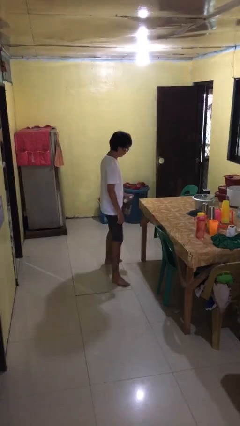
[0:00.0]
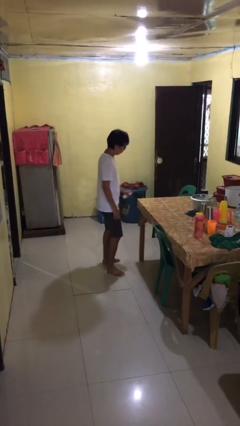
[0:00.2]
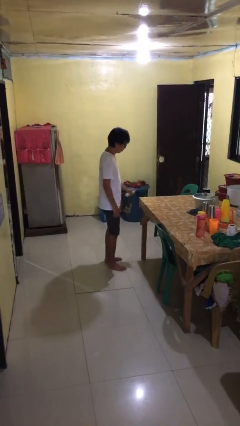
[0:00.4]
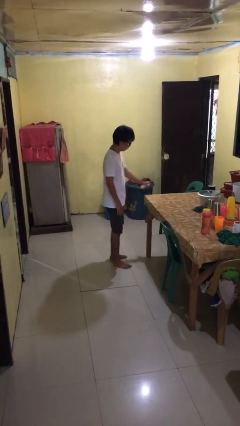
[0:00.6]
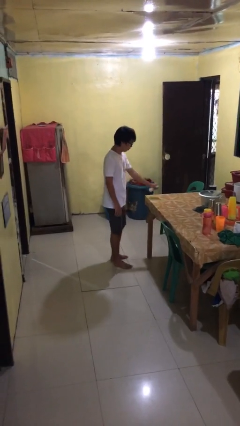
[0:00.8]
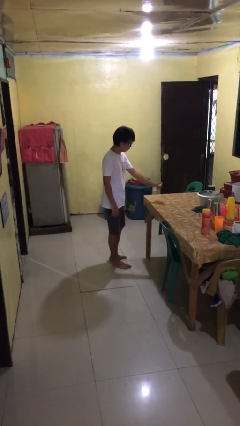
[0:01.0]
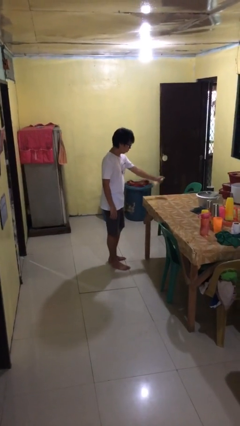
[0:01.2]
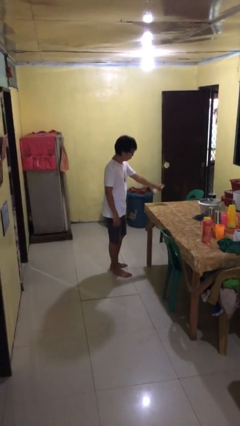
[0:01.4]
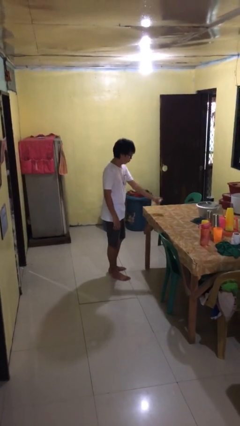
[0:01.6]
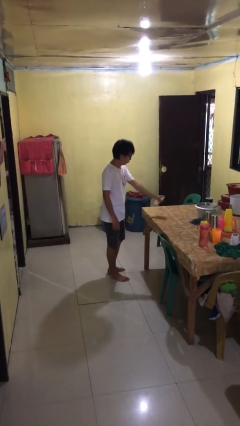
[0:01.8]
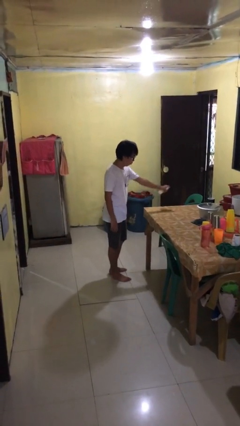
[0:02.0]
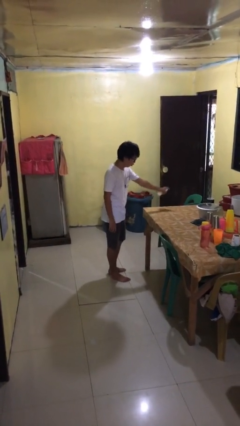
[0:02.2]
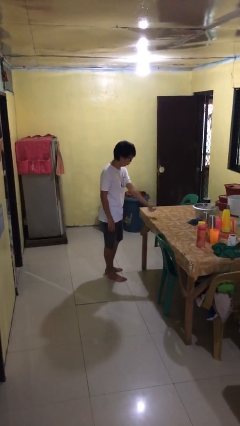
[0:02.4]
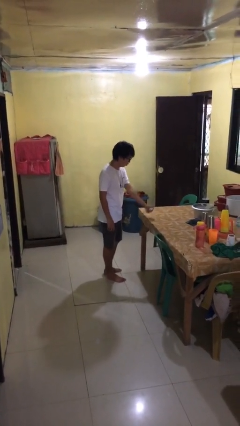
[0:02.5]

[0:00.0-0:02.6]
person sprays from bottle

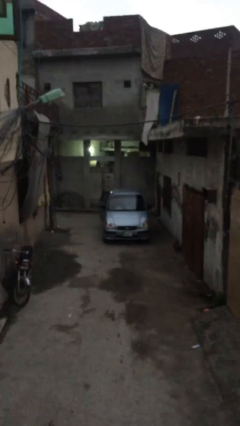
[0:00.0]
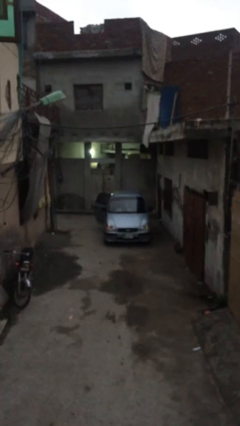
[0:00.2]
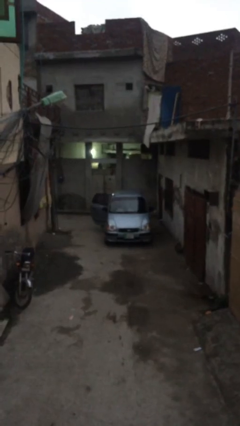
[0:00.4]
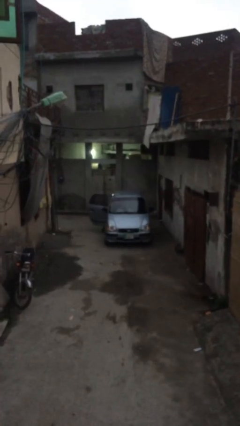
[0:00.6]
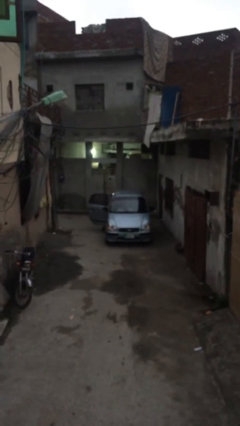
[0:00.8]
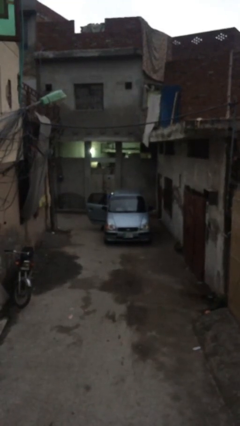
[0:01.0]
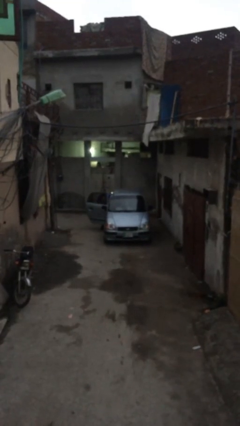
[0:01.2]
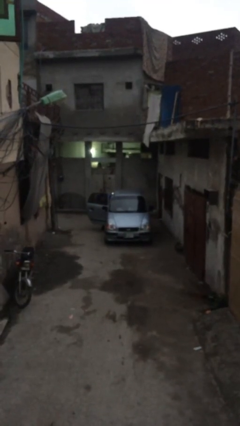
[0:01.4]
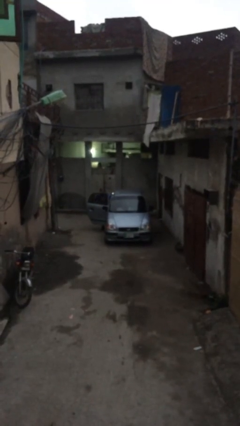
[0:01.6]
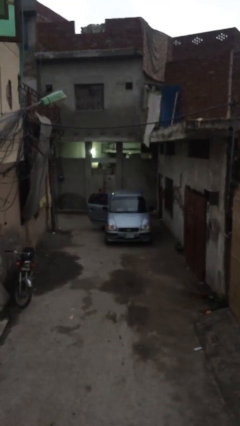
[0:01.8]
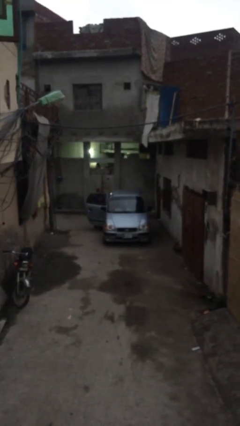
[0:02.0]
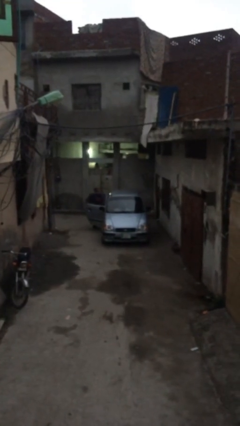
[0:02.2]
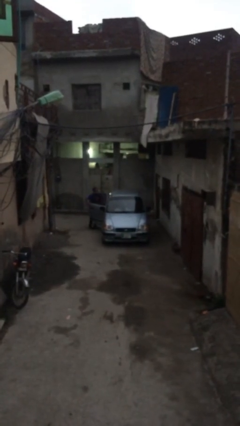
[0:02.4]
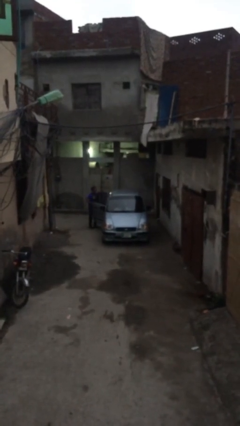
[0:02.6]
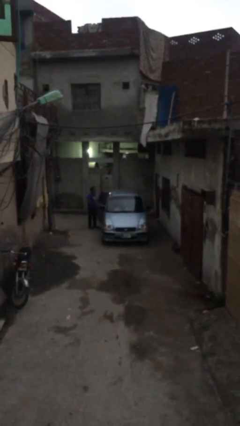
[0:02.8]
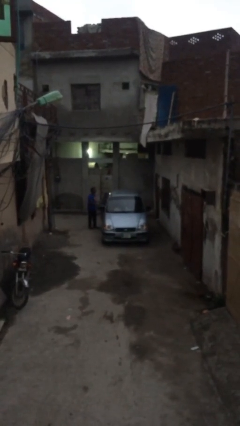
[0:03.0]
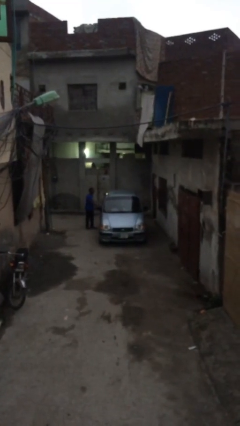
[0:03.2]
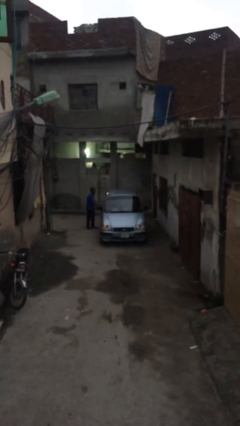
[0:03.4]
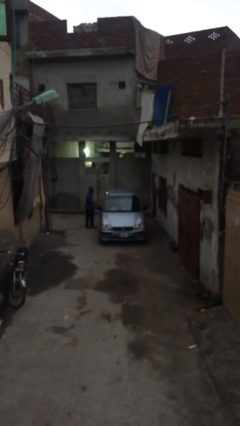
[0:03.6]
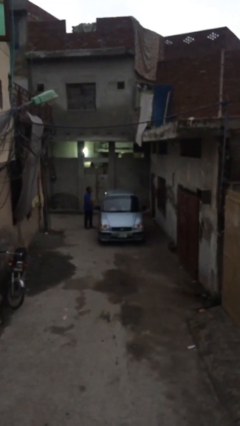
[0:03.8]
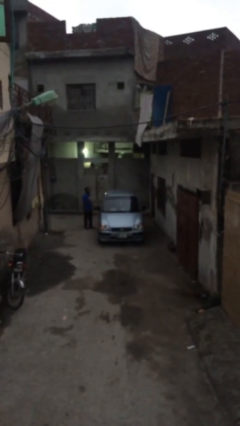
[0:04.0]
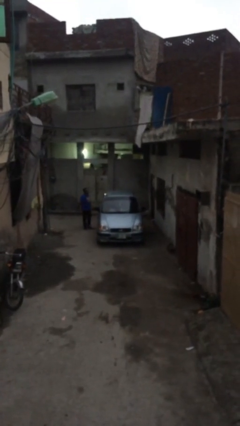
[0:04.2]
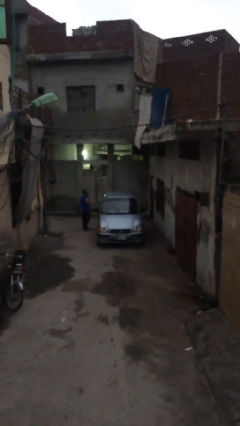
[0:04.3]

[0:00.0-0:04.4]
car drops off person

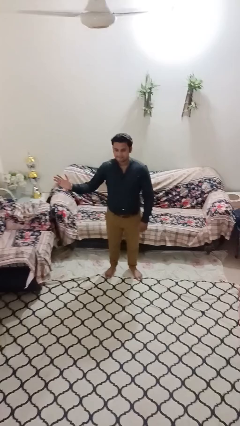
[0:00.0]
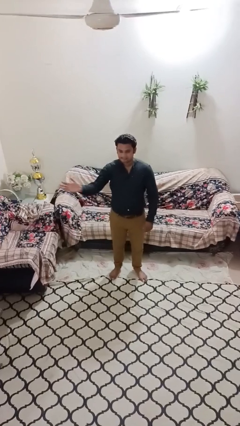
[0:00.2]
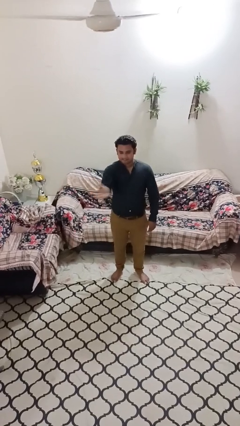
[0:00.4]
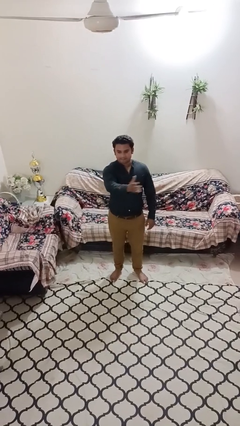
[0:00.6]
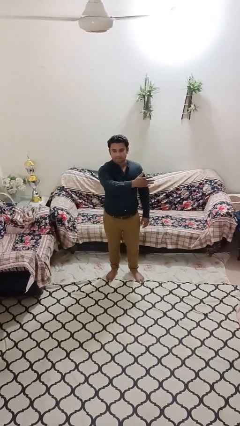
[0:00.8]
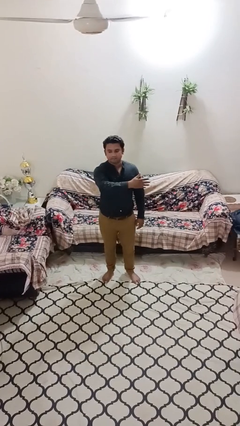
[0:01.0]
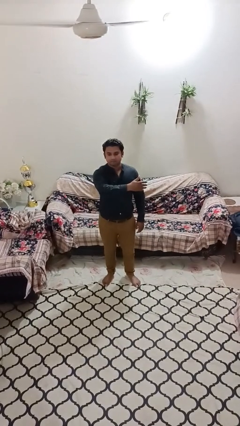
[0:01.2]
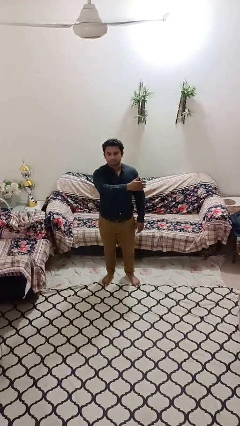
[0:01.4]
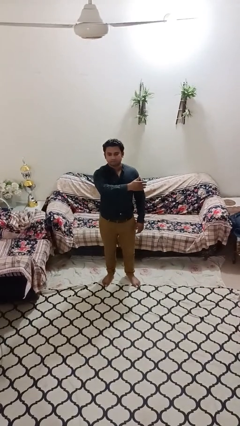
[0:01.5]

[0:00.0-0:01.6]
person gestures swipe left

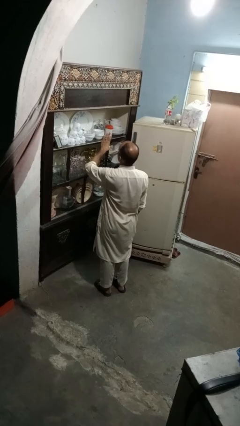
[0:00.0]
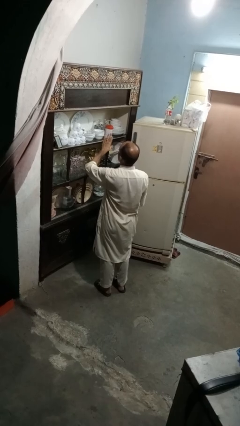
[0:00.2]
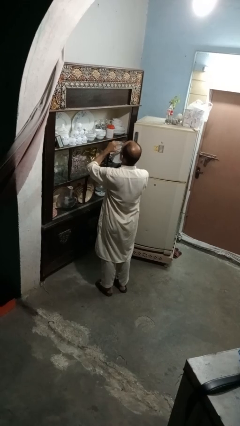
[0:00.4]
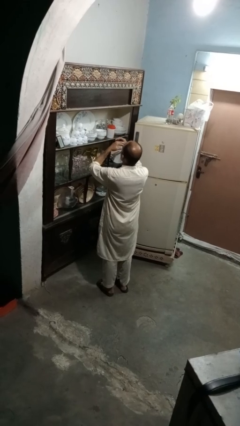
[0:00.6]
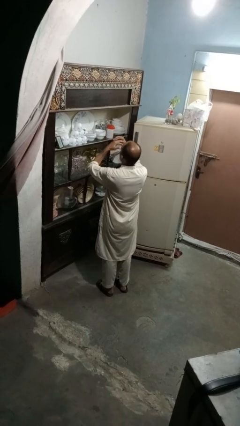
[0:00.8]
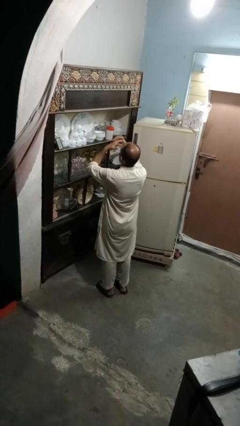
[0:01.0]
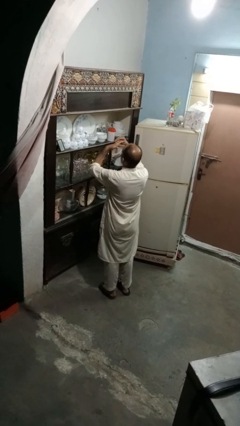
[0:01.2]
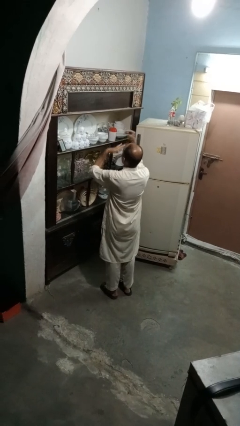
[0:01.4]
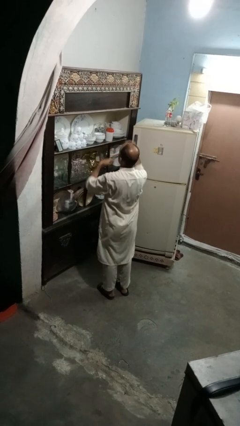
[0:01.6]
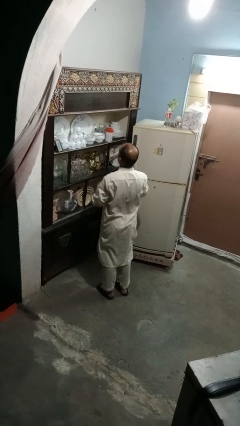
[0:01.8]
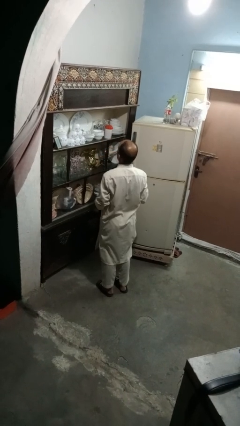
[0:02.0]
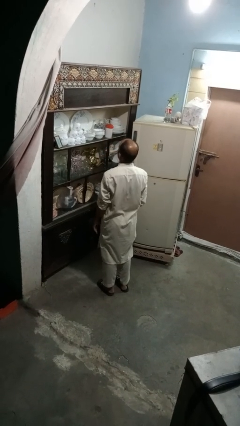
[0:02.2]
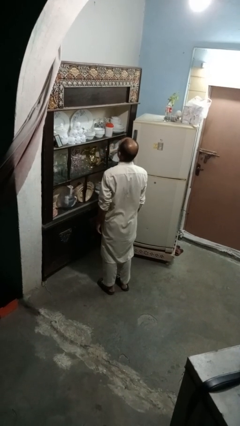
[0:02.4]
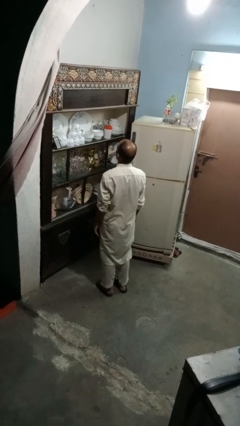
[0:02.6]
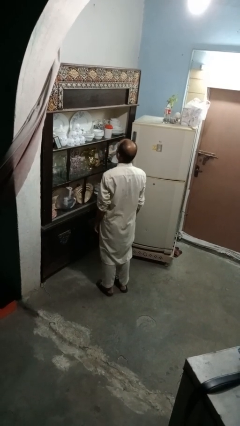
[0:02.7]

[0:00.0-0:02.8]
person takes off ring

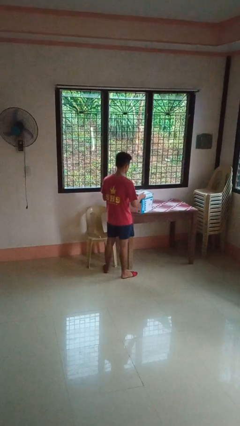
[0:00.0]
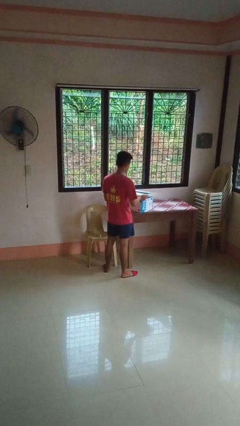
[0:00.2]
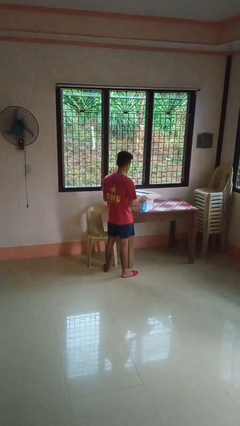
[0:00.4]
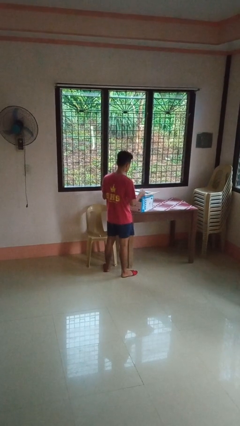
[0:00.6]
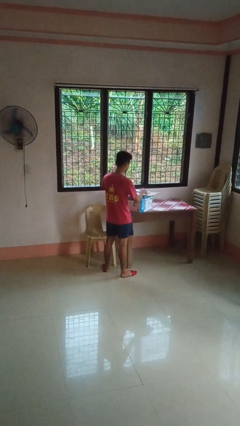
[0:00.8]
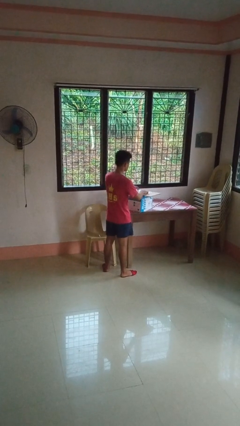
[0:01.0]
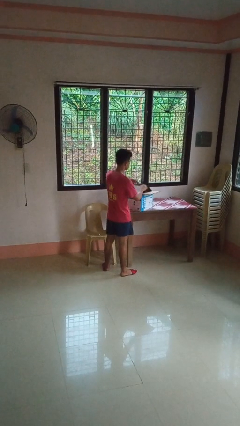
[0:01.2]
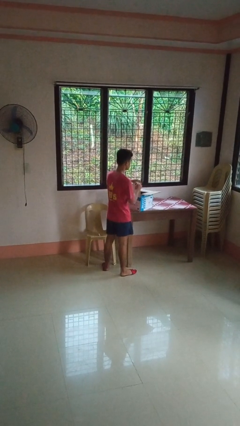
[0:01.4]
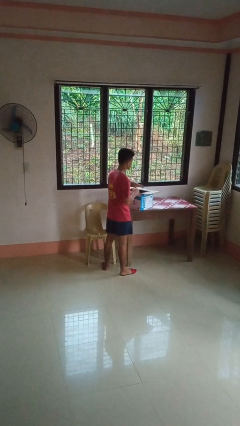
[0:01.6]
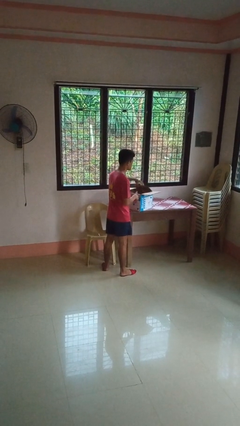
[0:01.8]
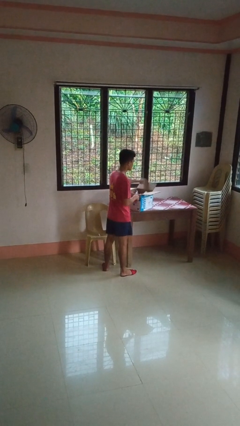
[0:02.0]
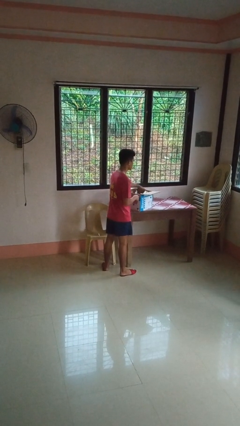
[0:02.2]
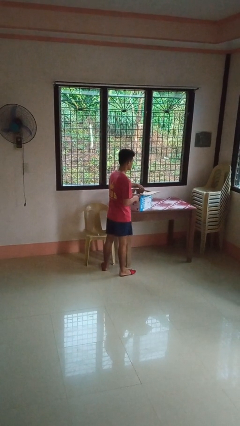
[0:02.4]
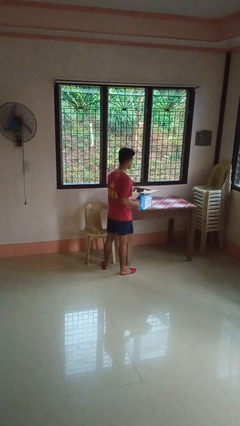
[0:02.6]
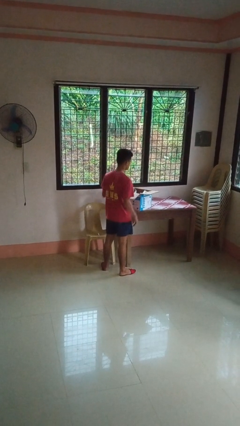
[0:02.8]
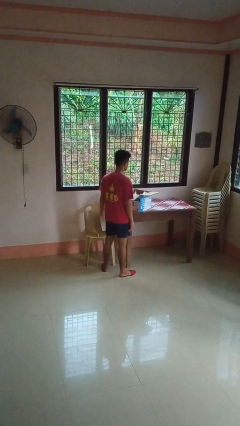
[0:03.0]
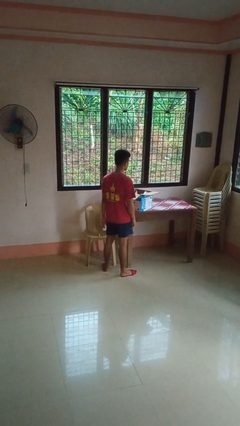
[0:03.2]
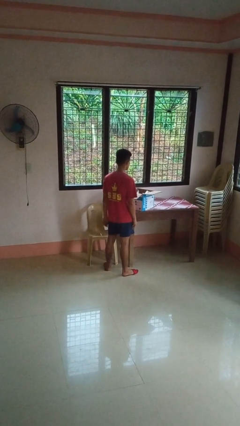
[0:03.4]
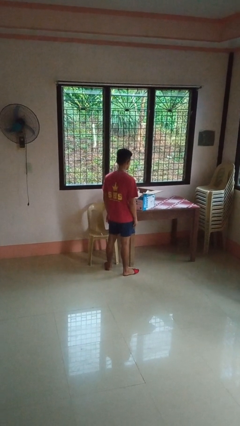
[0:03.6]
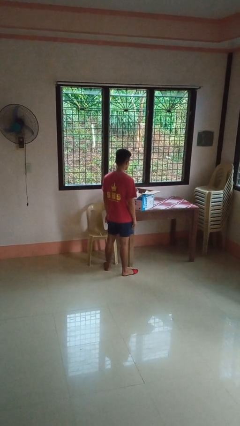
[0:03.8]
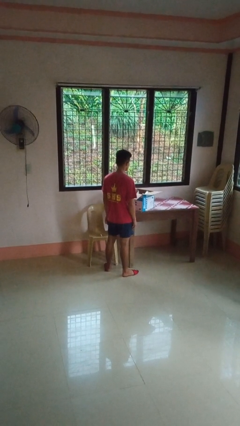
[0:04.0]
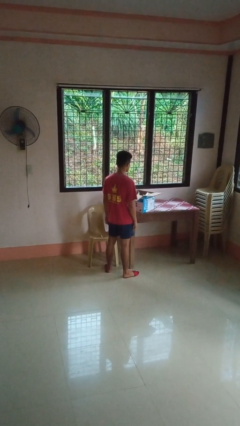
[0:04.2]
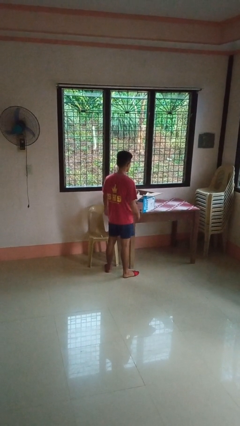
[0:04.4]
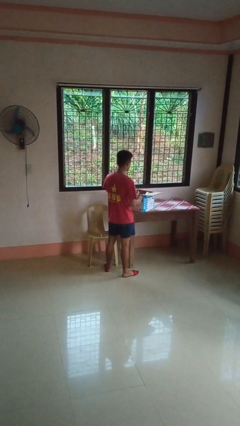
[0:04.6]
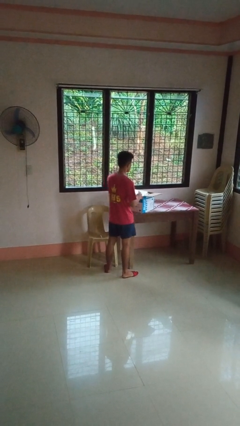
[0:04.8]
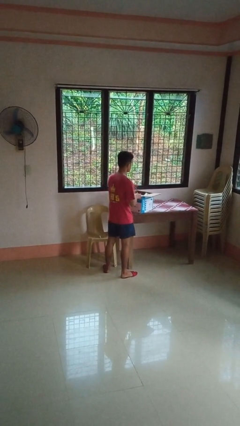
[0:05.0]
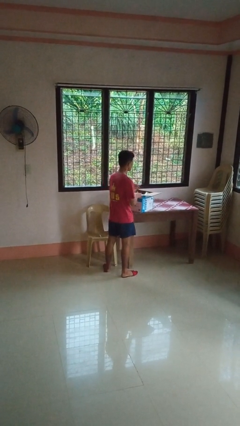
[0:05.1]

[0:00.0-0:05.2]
person opens box

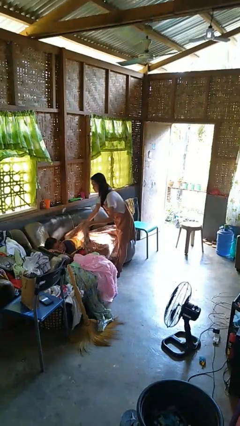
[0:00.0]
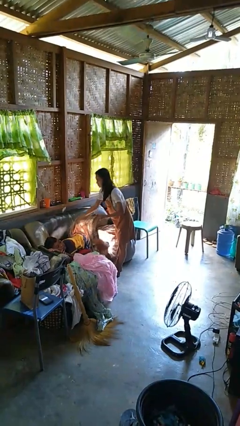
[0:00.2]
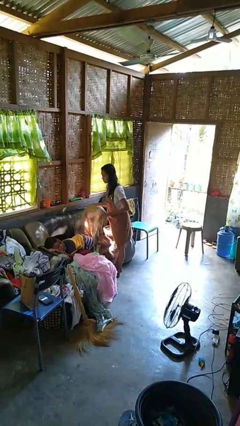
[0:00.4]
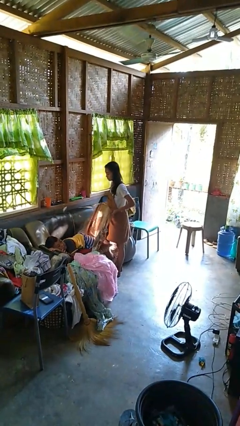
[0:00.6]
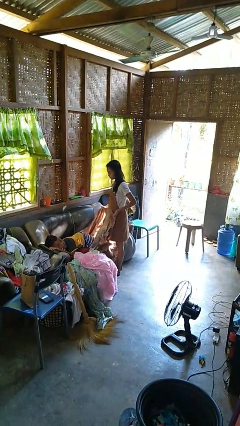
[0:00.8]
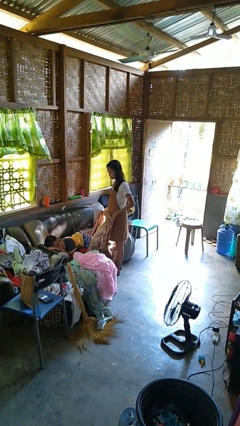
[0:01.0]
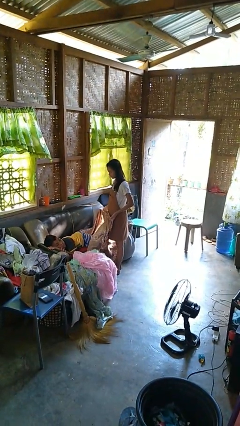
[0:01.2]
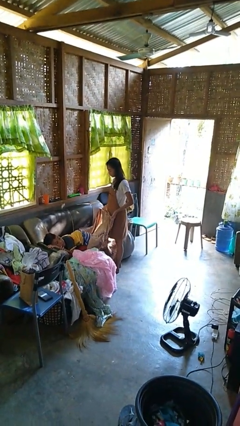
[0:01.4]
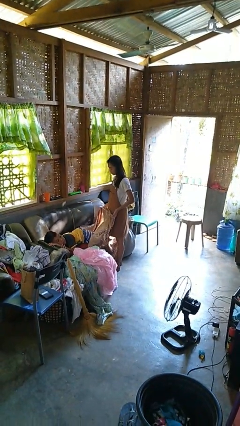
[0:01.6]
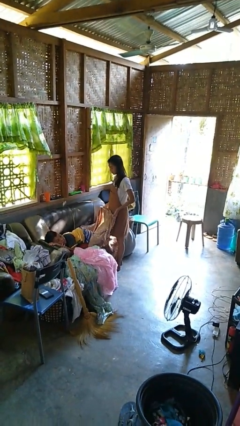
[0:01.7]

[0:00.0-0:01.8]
person uncovers friend with blanket
